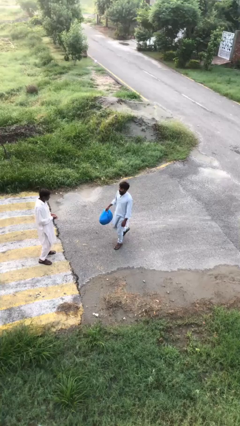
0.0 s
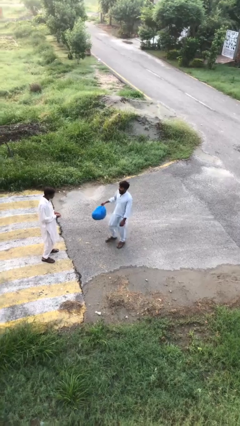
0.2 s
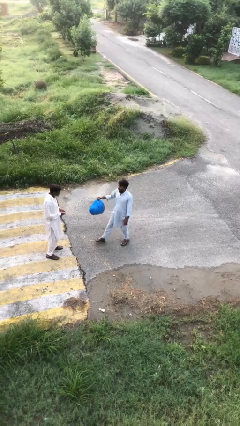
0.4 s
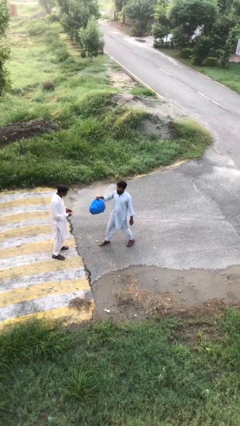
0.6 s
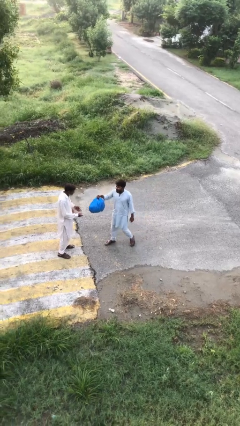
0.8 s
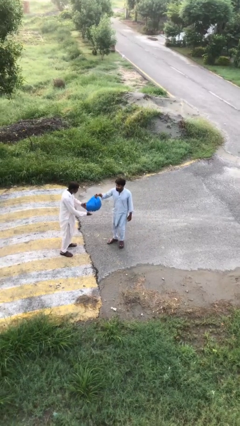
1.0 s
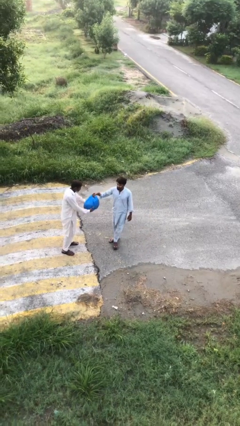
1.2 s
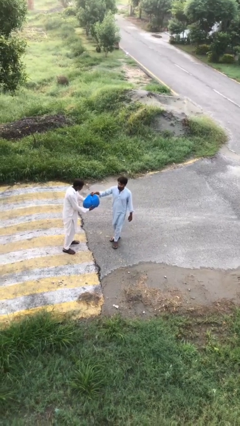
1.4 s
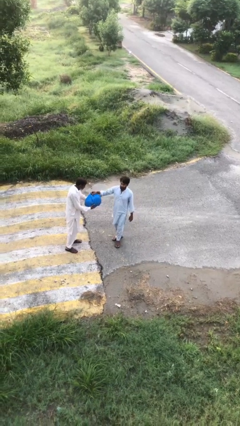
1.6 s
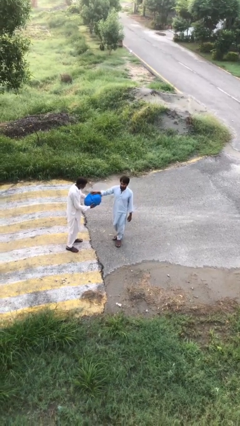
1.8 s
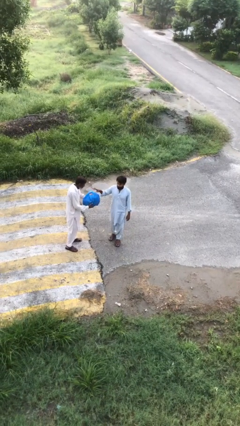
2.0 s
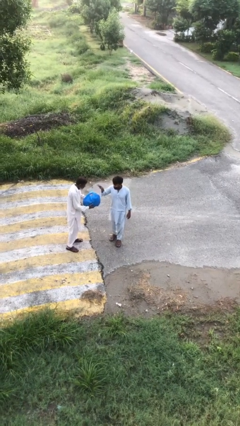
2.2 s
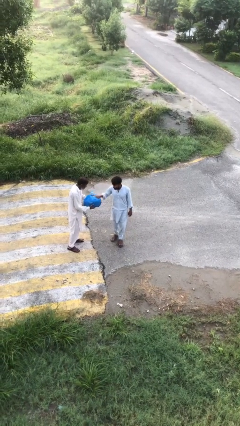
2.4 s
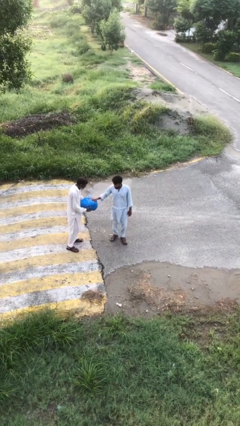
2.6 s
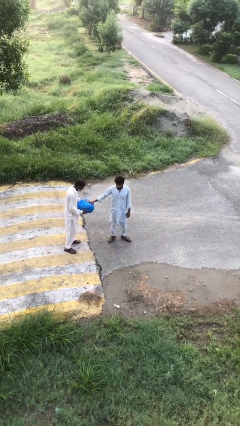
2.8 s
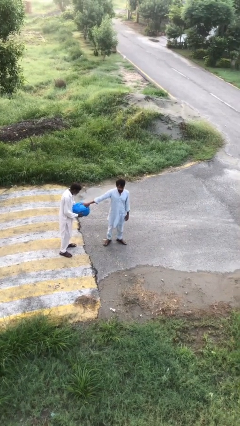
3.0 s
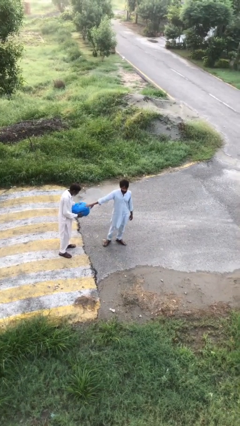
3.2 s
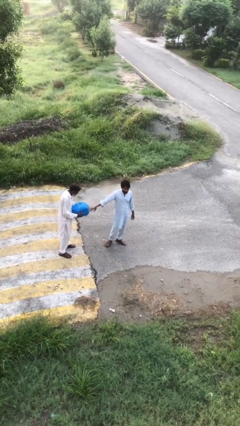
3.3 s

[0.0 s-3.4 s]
person transfers object to person

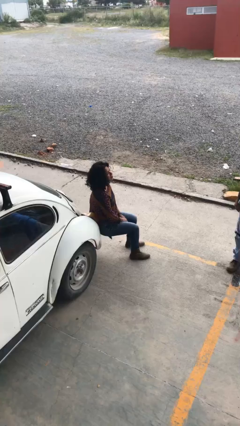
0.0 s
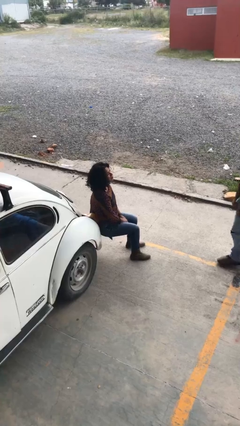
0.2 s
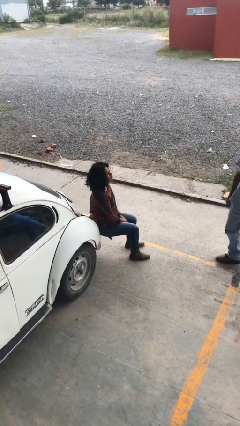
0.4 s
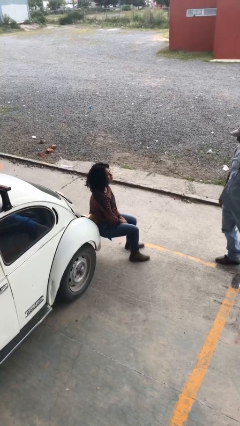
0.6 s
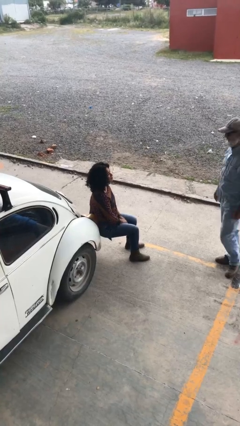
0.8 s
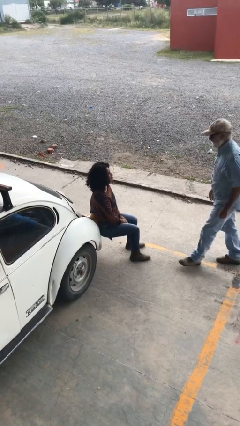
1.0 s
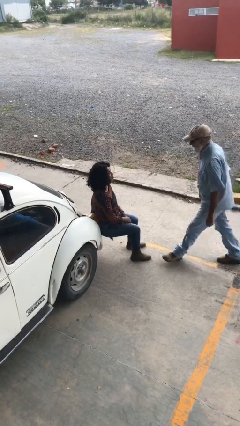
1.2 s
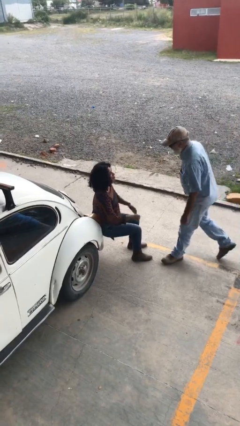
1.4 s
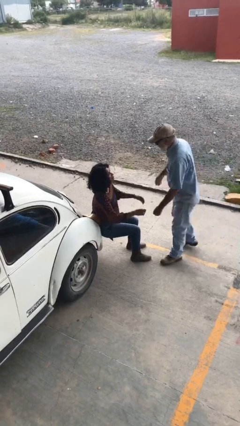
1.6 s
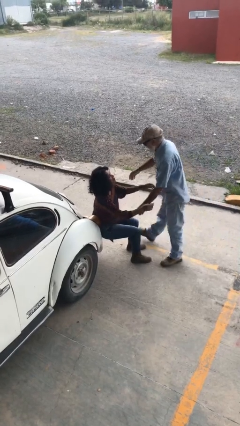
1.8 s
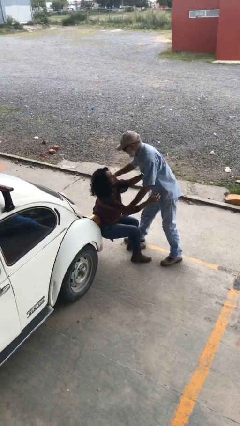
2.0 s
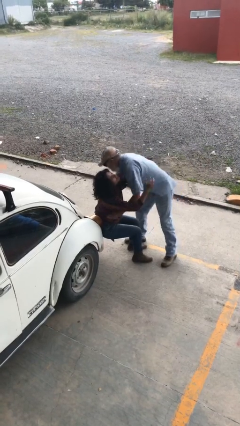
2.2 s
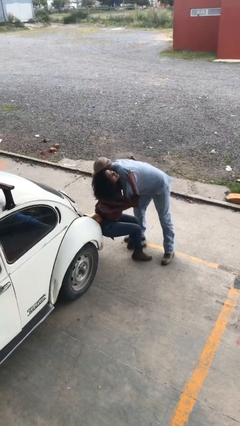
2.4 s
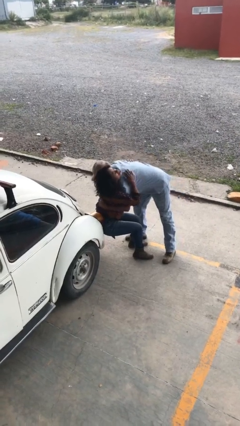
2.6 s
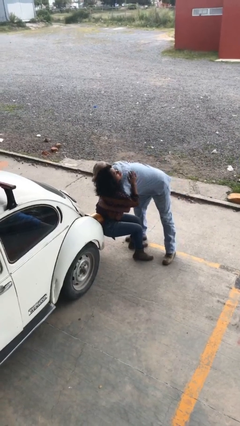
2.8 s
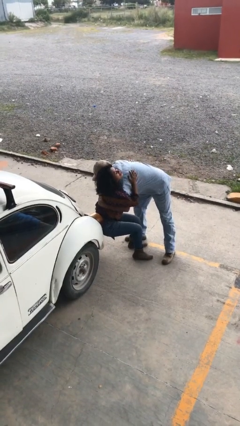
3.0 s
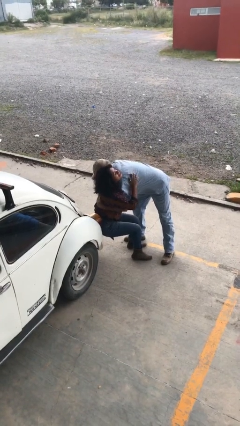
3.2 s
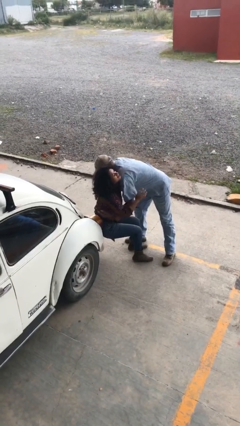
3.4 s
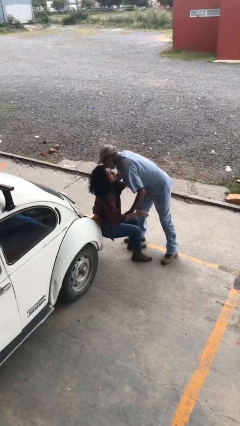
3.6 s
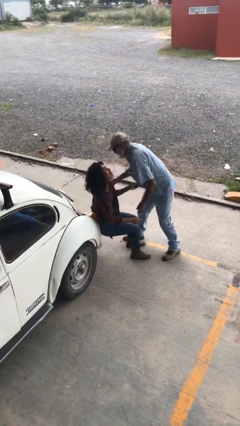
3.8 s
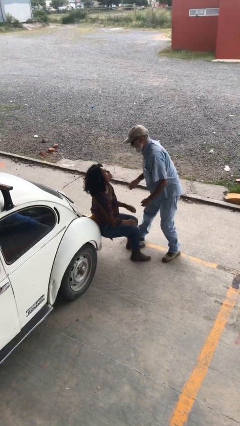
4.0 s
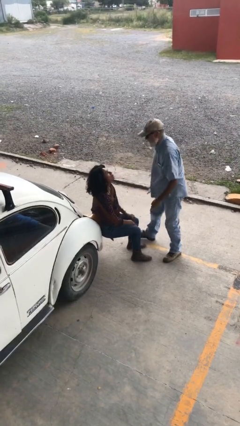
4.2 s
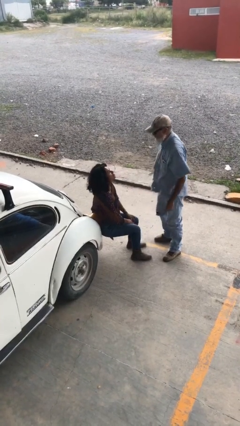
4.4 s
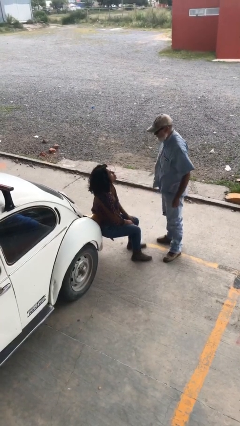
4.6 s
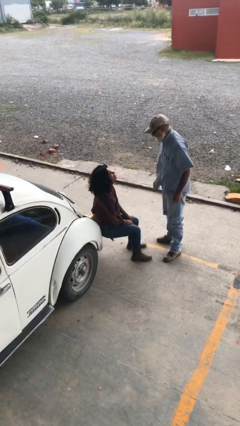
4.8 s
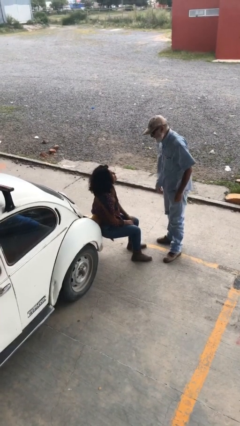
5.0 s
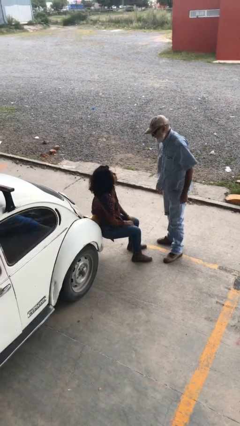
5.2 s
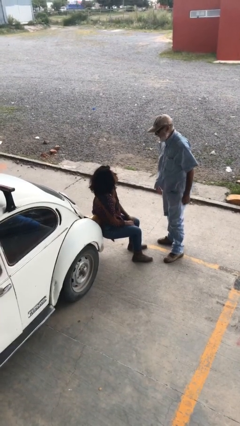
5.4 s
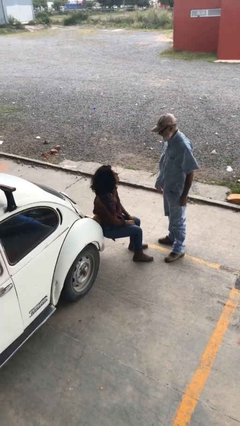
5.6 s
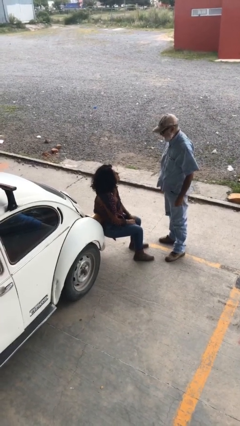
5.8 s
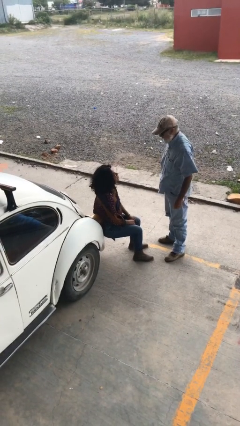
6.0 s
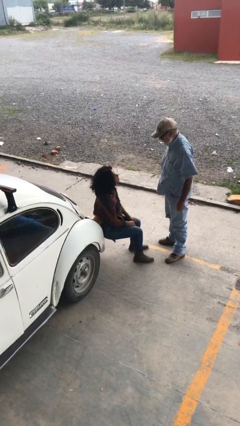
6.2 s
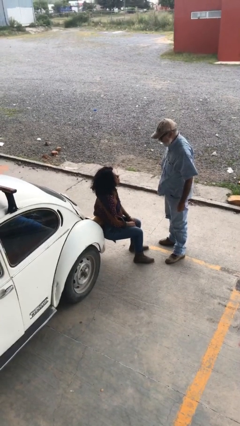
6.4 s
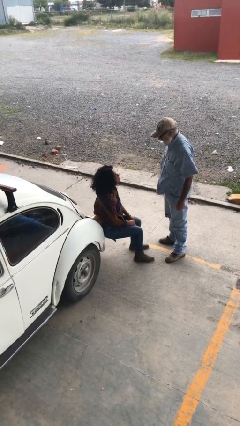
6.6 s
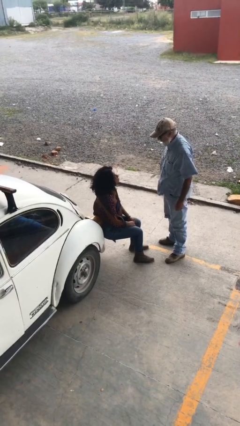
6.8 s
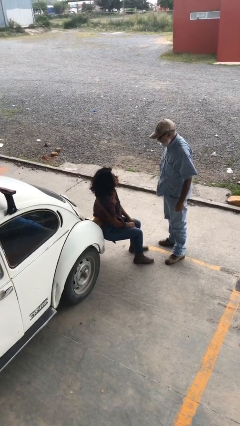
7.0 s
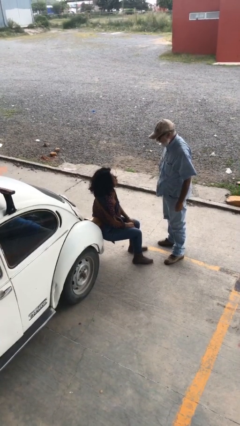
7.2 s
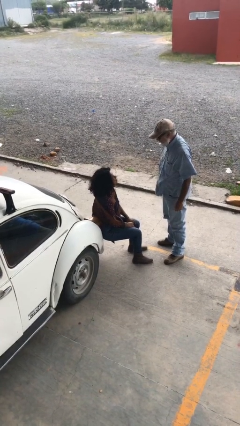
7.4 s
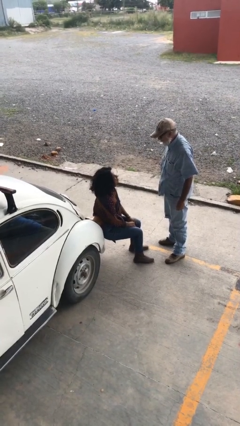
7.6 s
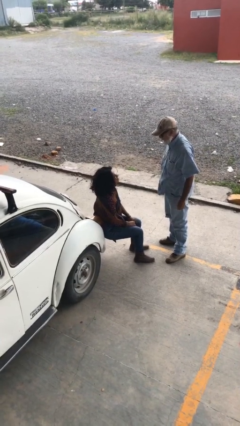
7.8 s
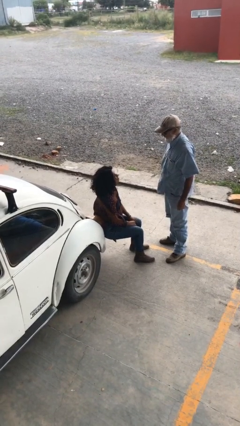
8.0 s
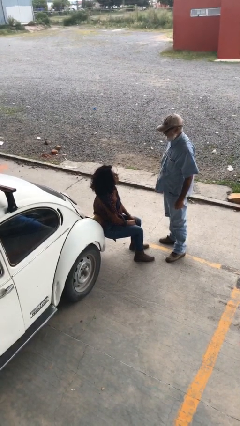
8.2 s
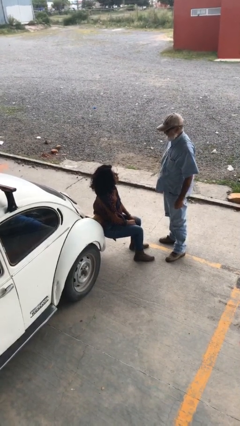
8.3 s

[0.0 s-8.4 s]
person embraces person

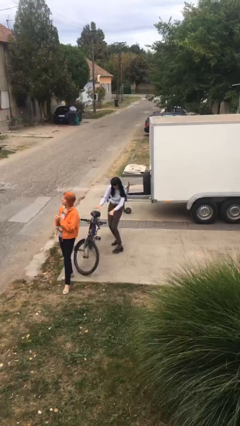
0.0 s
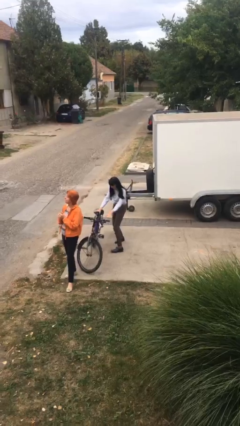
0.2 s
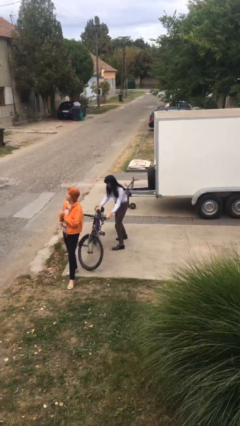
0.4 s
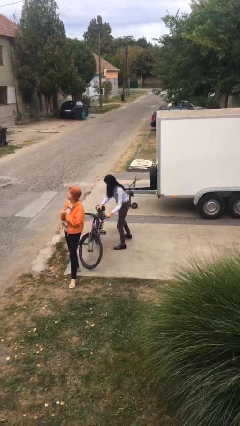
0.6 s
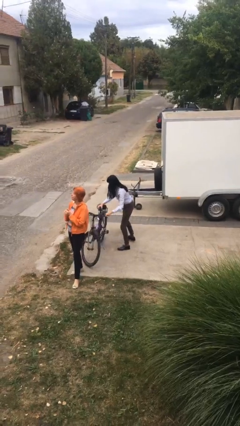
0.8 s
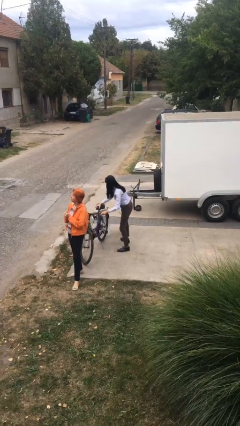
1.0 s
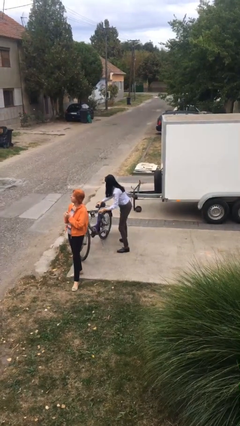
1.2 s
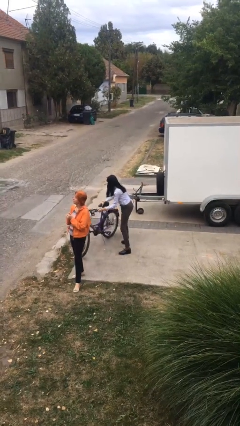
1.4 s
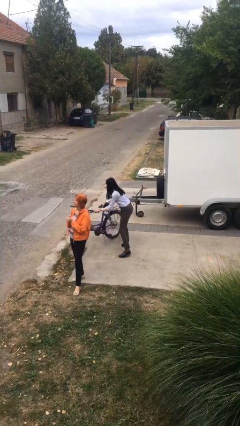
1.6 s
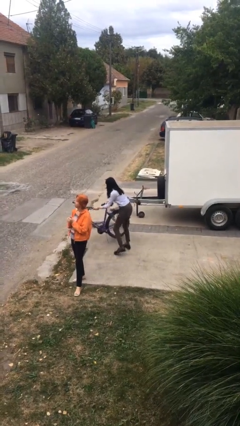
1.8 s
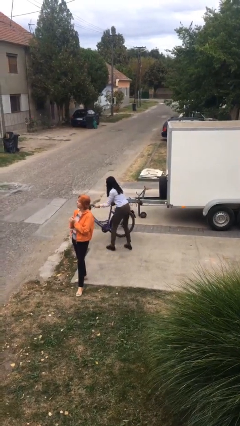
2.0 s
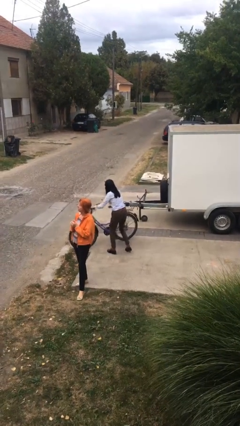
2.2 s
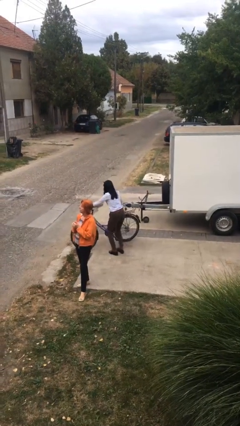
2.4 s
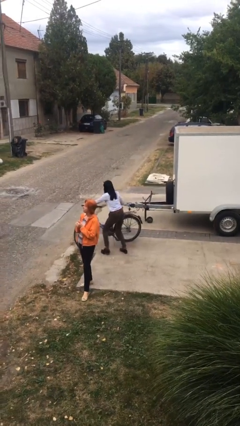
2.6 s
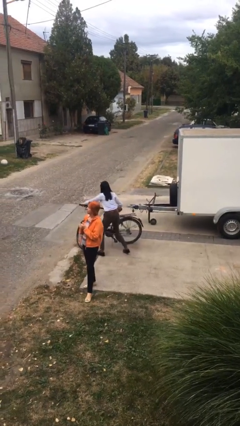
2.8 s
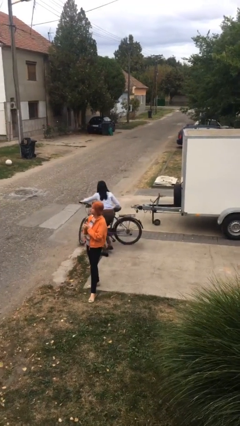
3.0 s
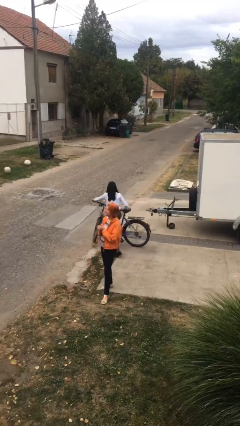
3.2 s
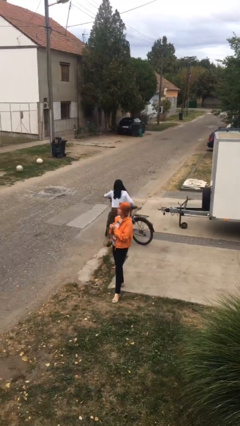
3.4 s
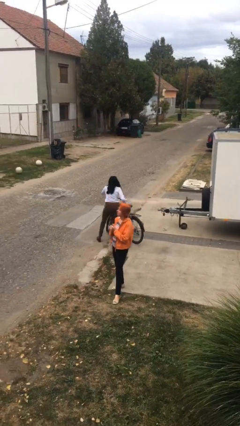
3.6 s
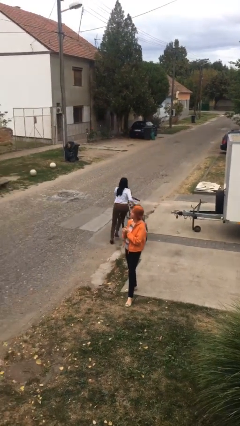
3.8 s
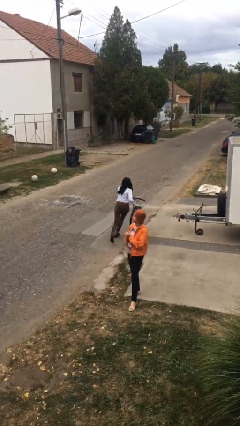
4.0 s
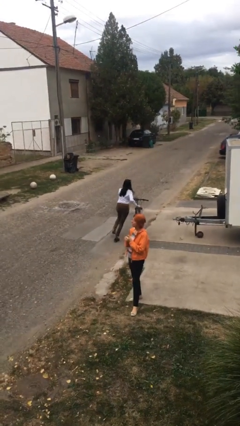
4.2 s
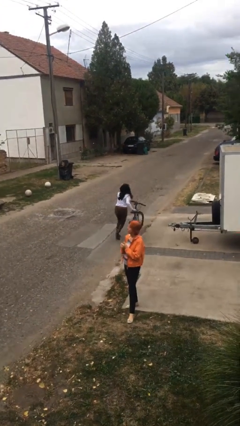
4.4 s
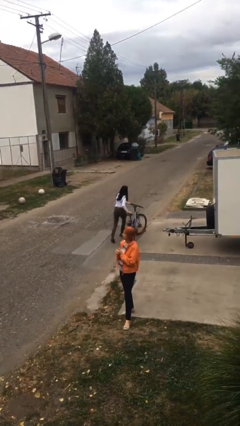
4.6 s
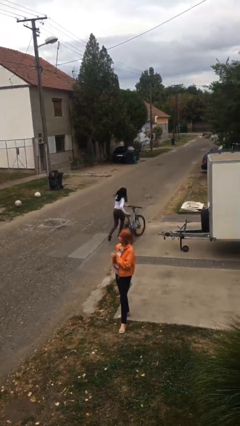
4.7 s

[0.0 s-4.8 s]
person steals object from person

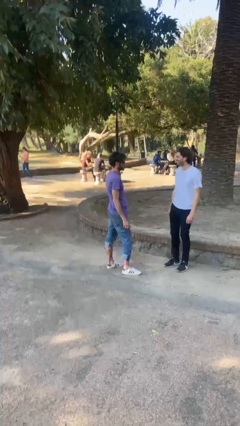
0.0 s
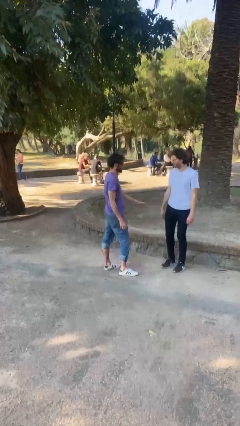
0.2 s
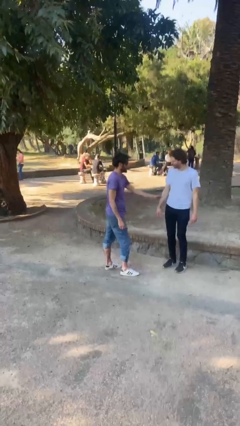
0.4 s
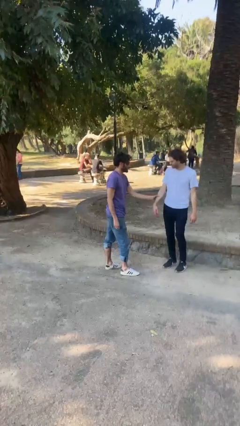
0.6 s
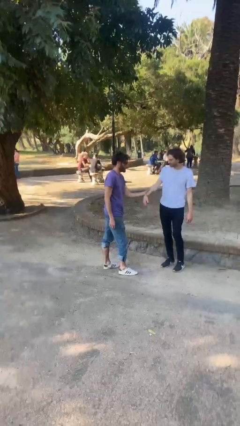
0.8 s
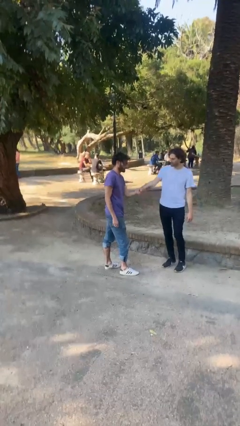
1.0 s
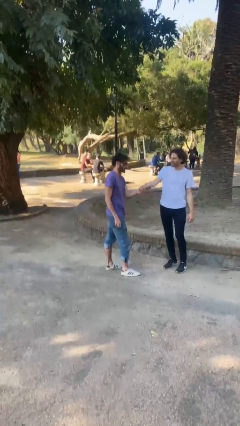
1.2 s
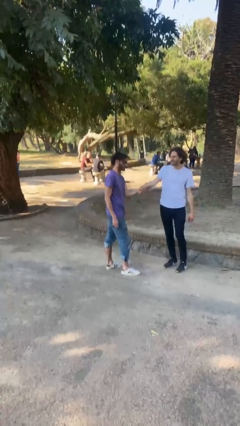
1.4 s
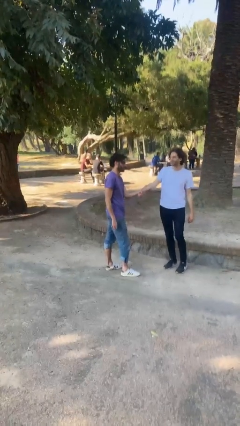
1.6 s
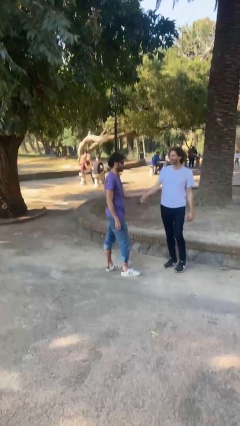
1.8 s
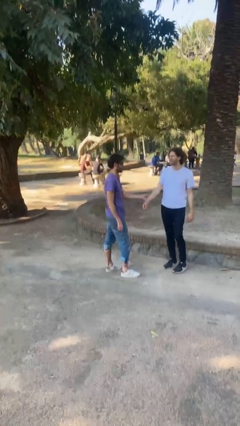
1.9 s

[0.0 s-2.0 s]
person grabs person by forearm
